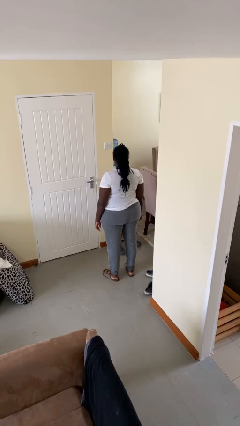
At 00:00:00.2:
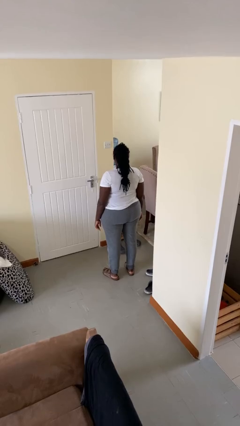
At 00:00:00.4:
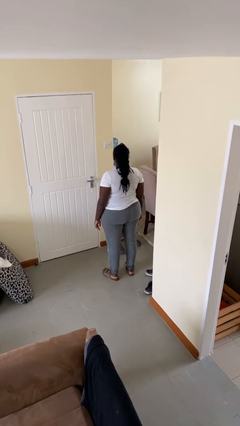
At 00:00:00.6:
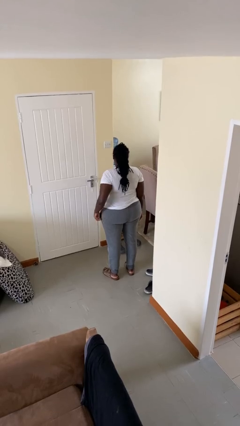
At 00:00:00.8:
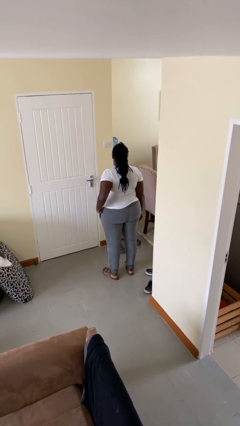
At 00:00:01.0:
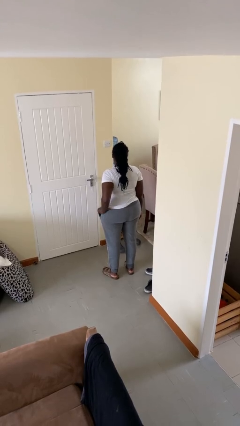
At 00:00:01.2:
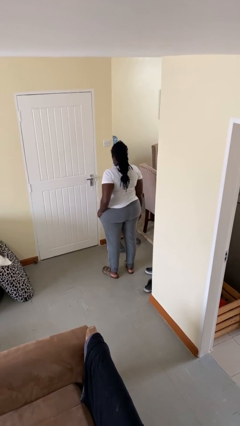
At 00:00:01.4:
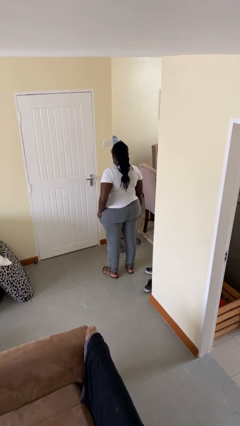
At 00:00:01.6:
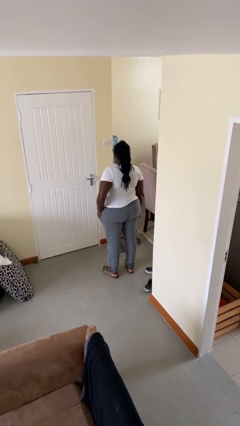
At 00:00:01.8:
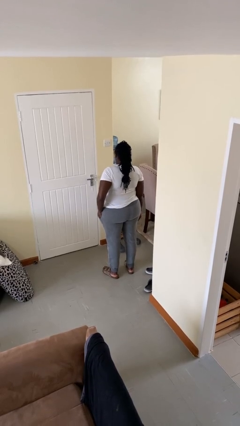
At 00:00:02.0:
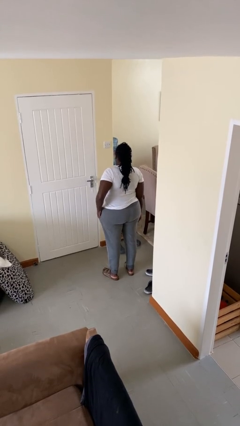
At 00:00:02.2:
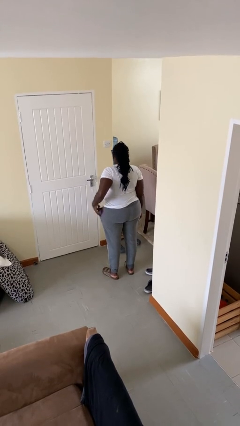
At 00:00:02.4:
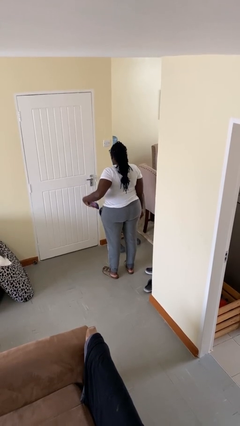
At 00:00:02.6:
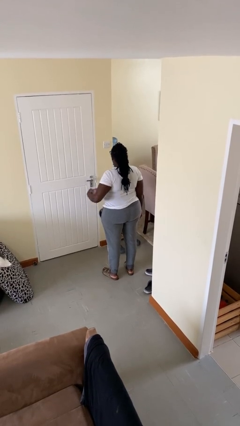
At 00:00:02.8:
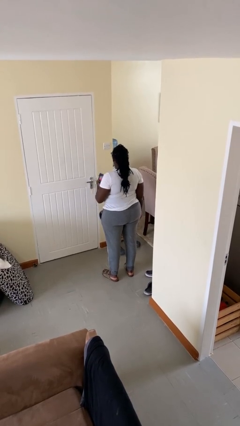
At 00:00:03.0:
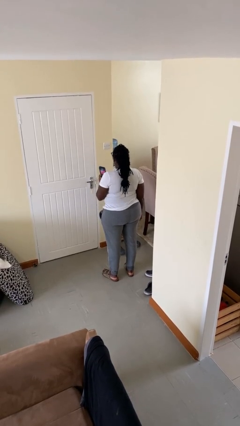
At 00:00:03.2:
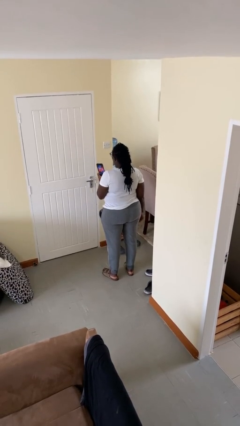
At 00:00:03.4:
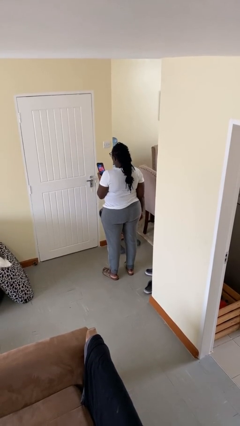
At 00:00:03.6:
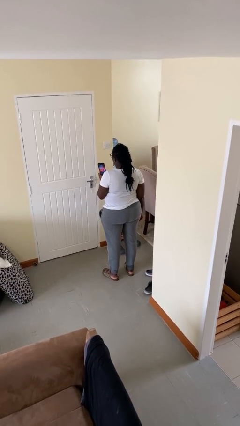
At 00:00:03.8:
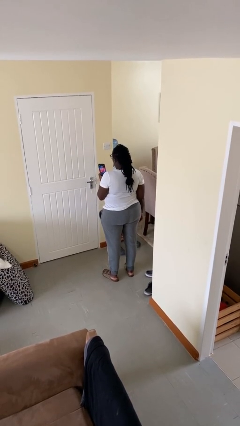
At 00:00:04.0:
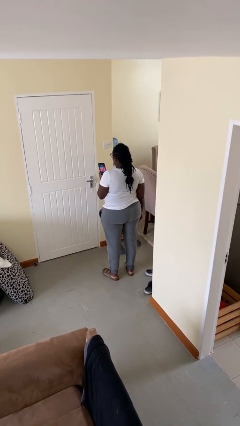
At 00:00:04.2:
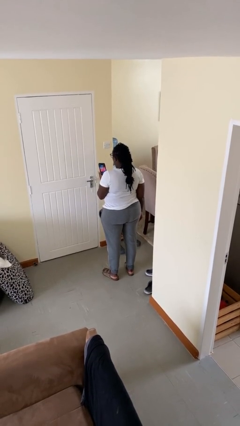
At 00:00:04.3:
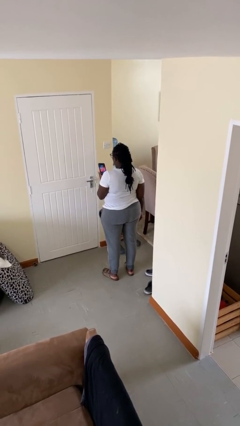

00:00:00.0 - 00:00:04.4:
person takes phone from pocket

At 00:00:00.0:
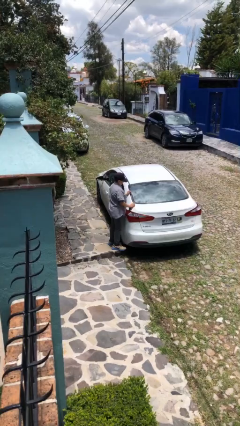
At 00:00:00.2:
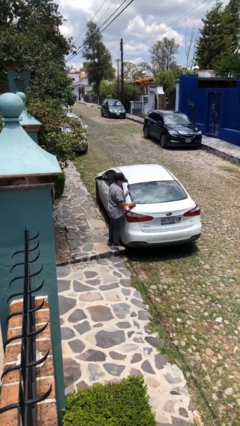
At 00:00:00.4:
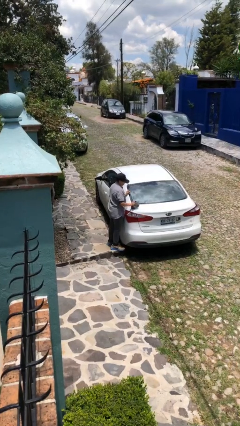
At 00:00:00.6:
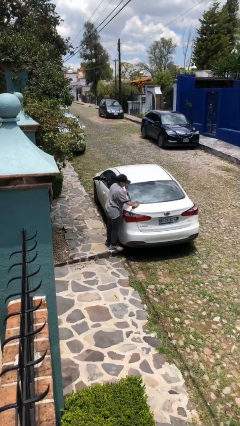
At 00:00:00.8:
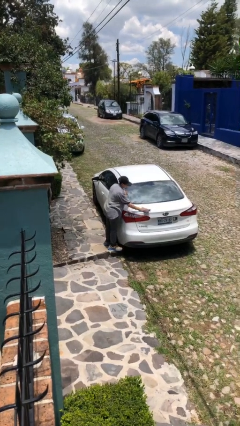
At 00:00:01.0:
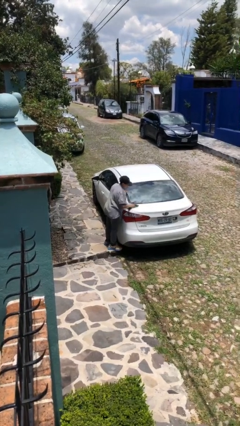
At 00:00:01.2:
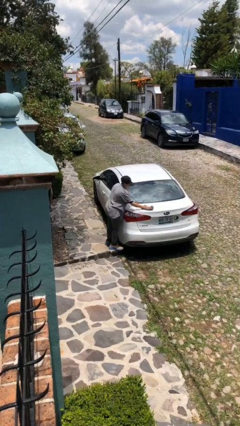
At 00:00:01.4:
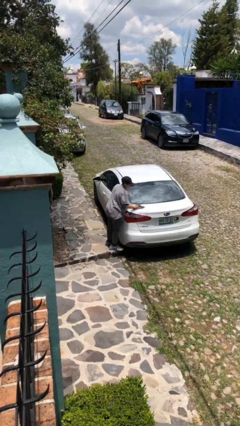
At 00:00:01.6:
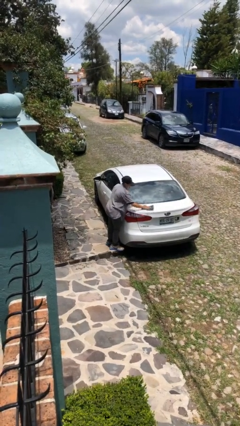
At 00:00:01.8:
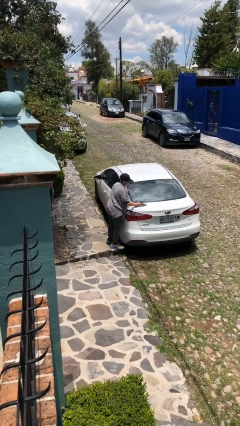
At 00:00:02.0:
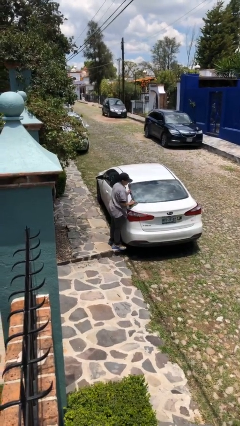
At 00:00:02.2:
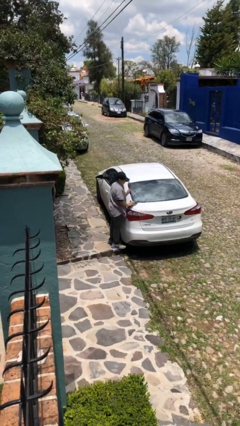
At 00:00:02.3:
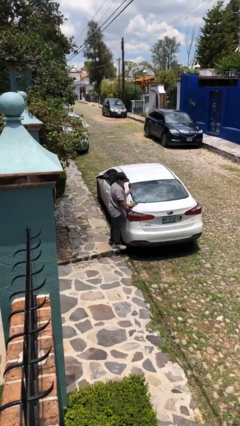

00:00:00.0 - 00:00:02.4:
person polishes car with rag

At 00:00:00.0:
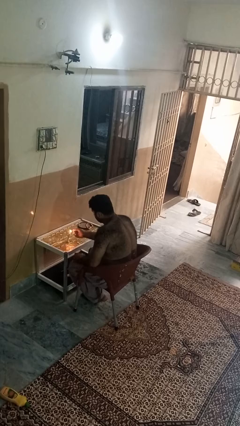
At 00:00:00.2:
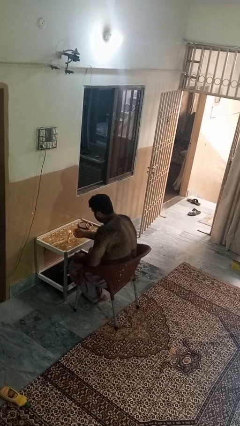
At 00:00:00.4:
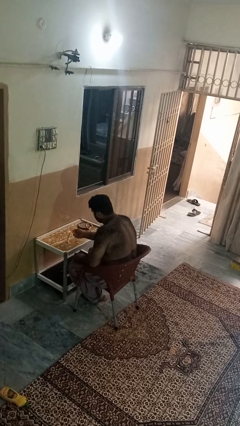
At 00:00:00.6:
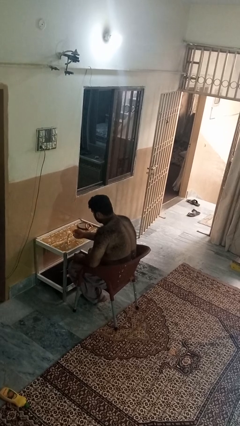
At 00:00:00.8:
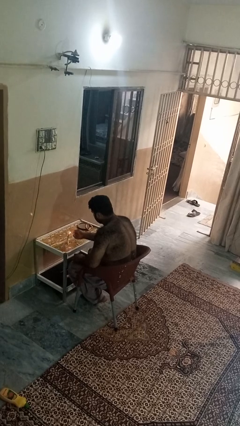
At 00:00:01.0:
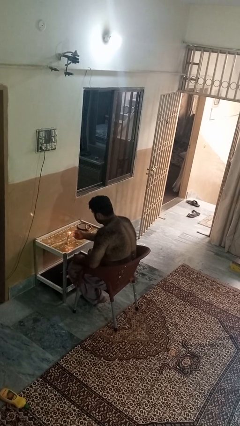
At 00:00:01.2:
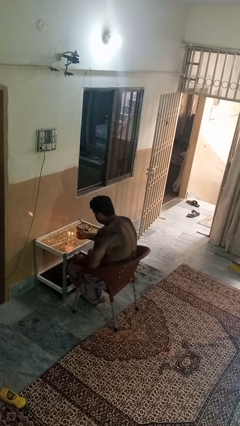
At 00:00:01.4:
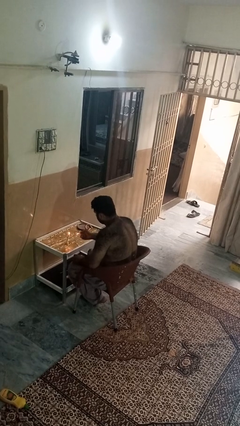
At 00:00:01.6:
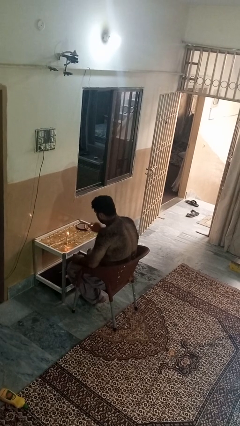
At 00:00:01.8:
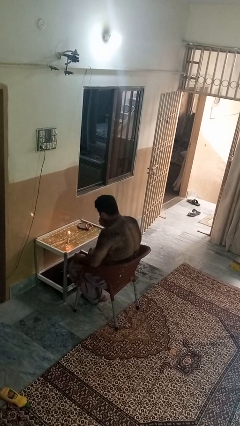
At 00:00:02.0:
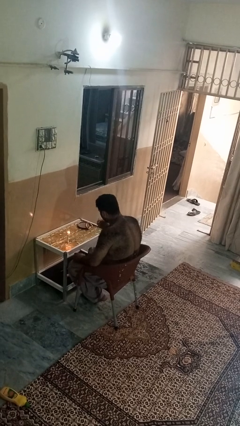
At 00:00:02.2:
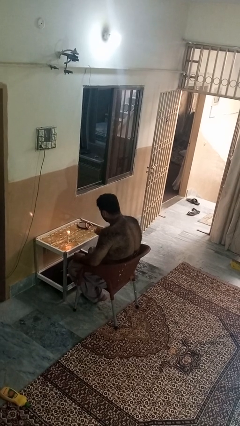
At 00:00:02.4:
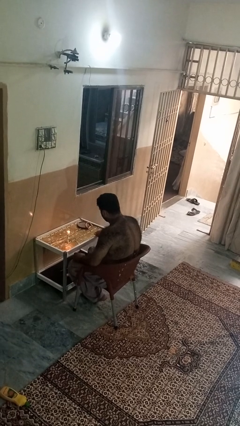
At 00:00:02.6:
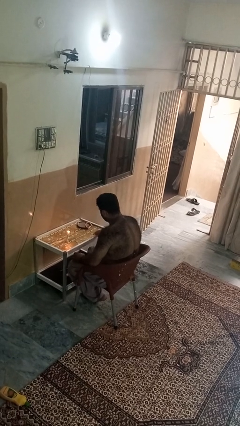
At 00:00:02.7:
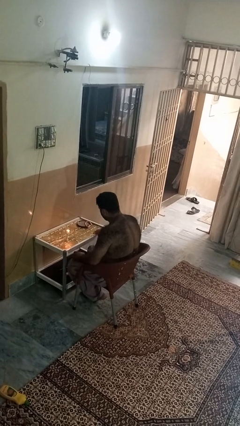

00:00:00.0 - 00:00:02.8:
person shakes head

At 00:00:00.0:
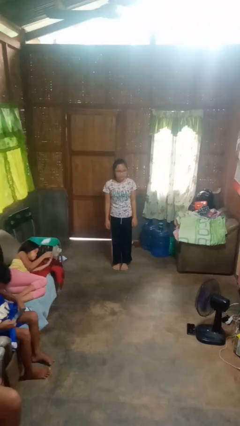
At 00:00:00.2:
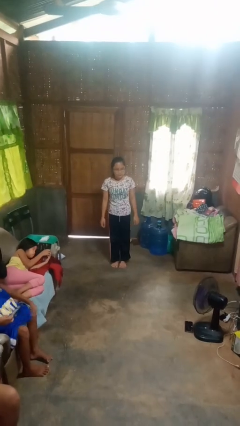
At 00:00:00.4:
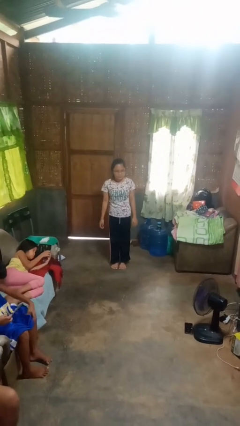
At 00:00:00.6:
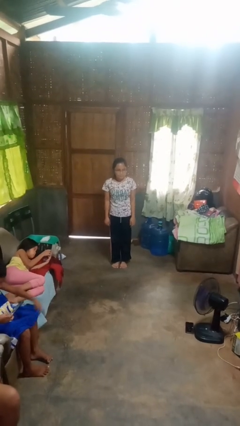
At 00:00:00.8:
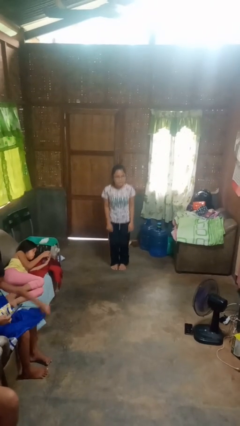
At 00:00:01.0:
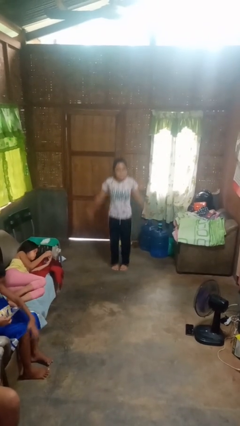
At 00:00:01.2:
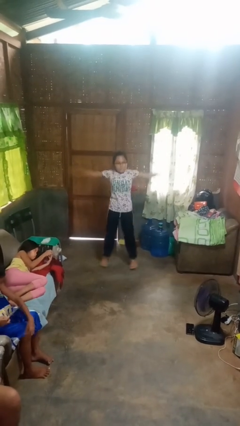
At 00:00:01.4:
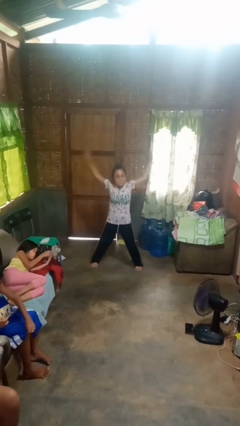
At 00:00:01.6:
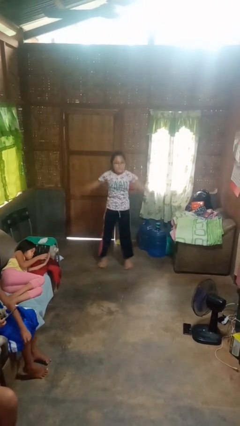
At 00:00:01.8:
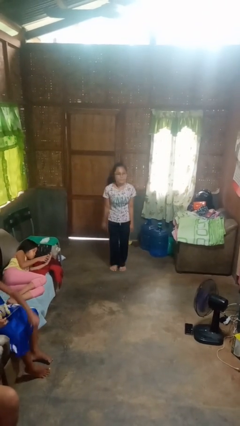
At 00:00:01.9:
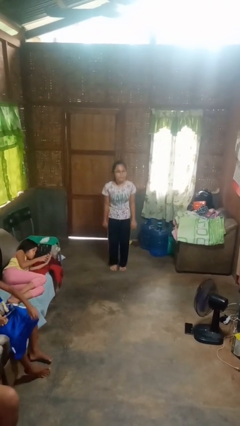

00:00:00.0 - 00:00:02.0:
person exercises with jumping jacks

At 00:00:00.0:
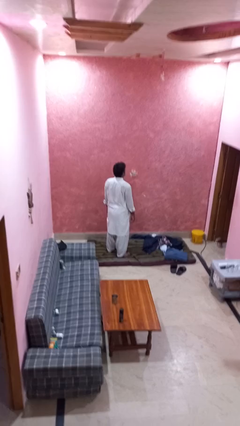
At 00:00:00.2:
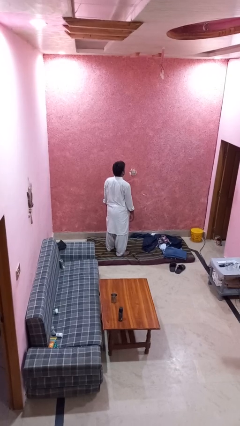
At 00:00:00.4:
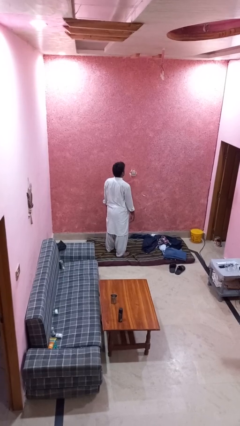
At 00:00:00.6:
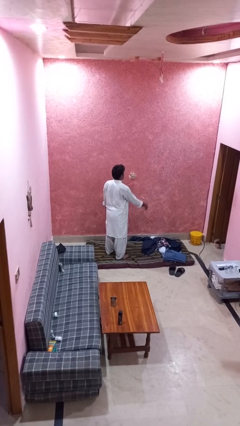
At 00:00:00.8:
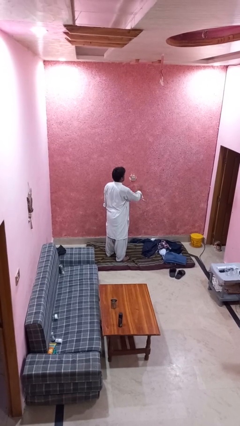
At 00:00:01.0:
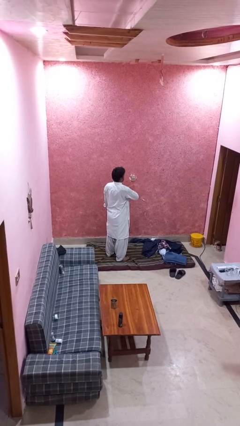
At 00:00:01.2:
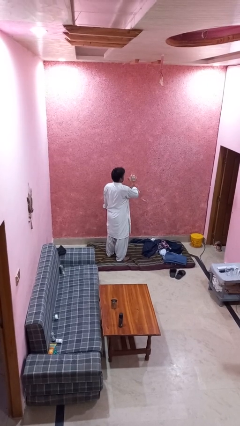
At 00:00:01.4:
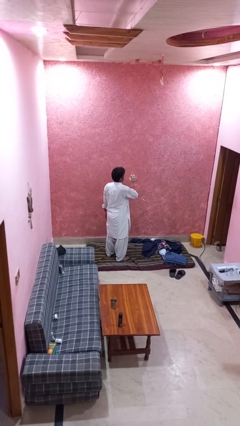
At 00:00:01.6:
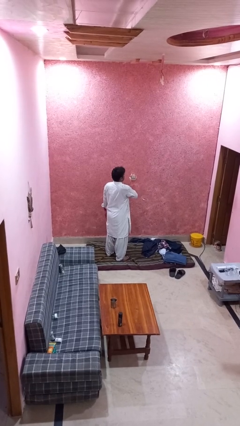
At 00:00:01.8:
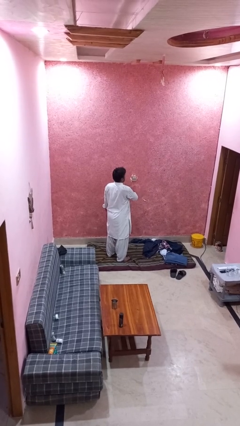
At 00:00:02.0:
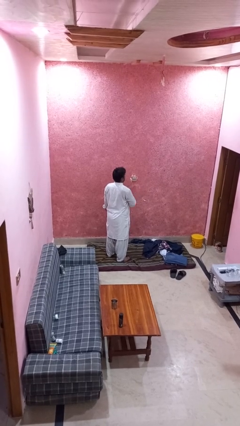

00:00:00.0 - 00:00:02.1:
person drums on chest

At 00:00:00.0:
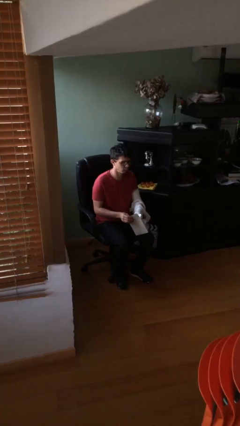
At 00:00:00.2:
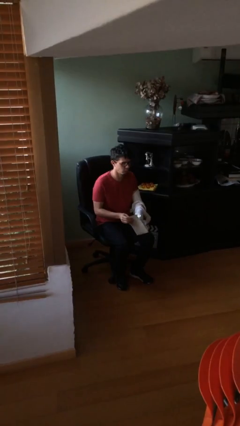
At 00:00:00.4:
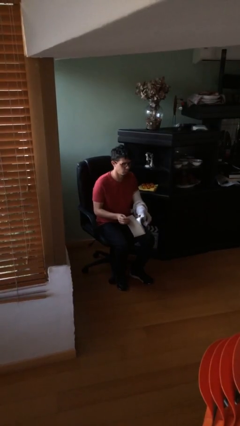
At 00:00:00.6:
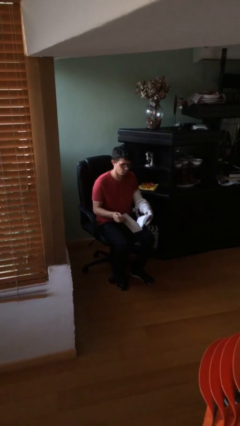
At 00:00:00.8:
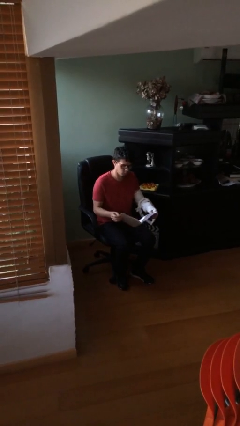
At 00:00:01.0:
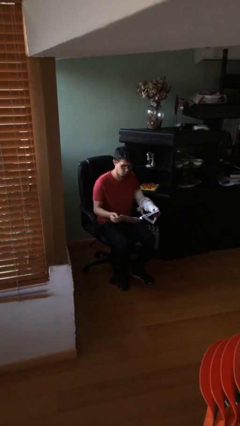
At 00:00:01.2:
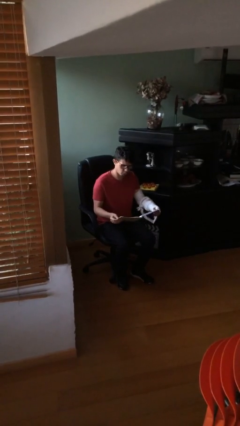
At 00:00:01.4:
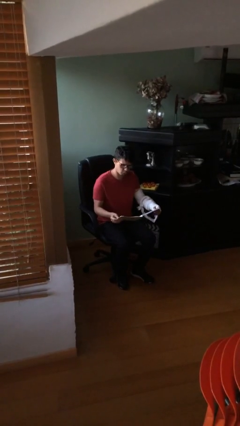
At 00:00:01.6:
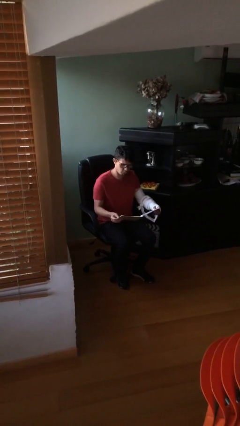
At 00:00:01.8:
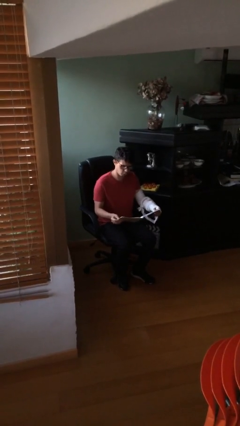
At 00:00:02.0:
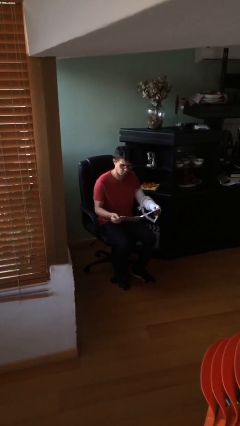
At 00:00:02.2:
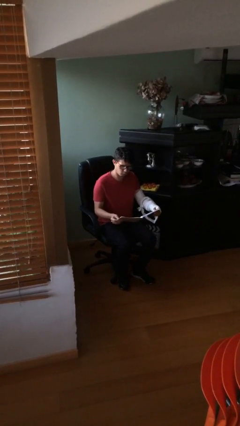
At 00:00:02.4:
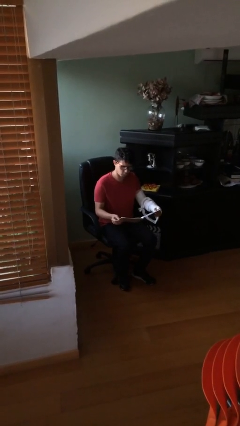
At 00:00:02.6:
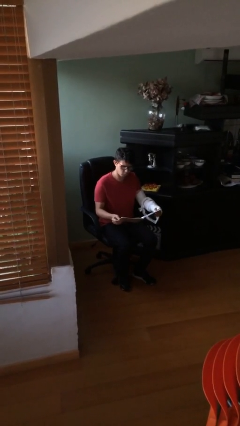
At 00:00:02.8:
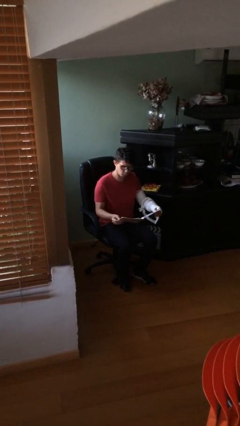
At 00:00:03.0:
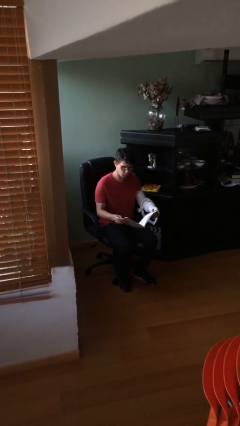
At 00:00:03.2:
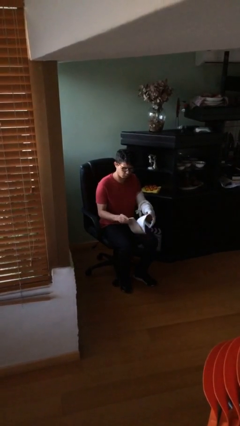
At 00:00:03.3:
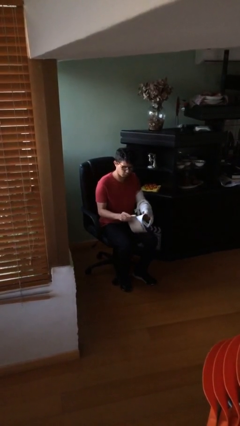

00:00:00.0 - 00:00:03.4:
person reads document
